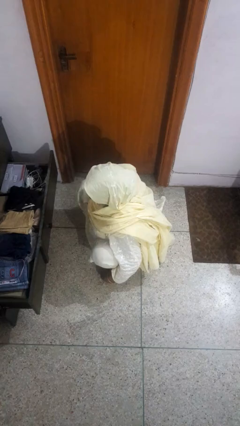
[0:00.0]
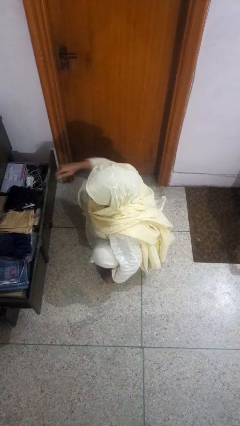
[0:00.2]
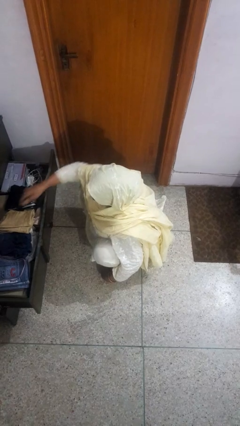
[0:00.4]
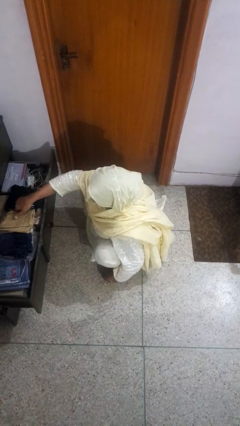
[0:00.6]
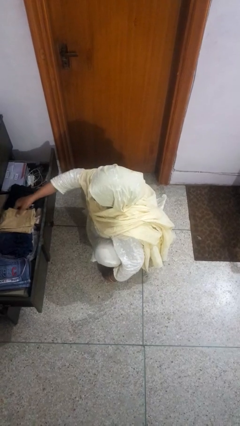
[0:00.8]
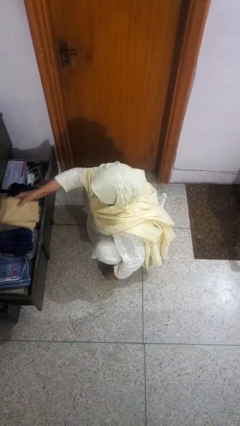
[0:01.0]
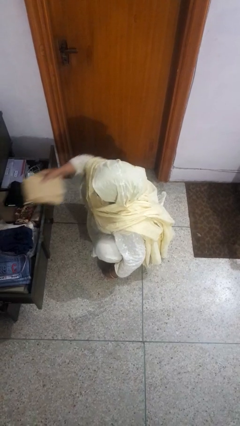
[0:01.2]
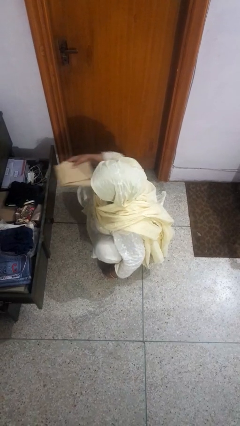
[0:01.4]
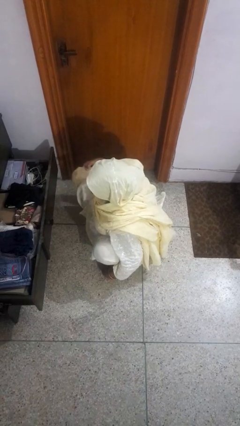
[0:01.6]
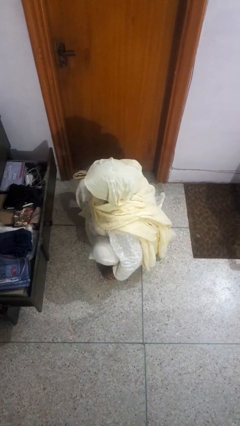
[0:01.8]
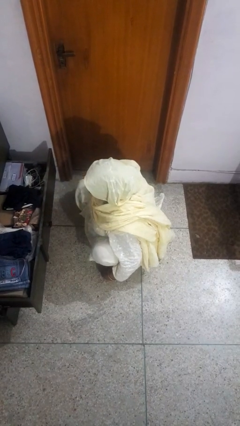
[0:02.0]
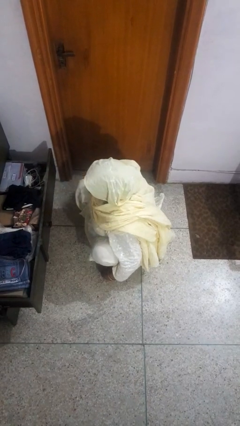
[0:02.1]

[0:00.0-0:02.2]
person takes clothes from dresser

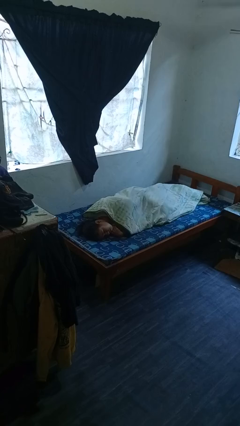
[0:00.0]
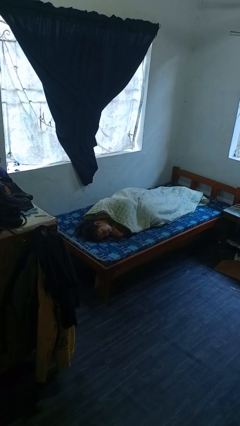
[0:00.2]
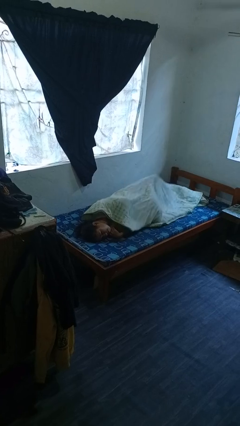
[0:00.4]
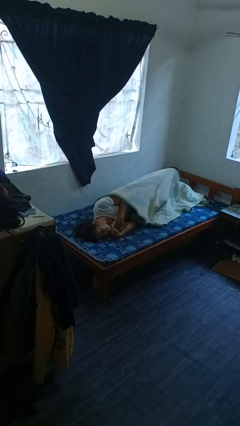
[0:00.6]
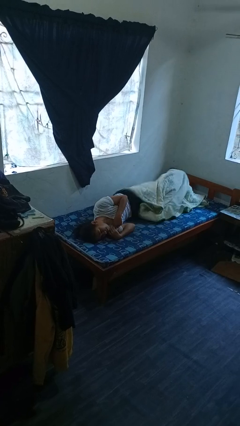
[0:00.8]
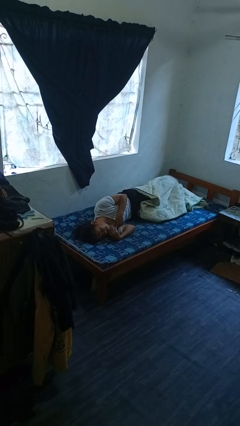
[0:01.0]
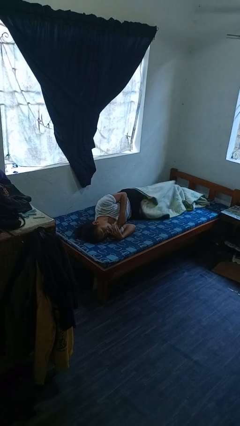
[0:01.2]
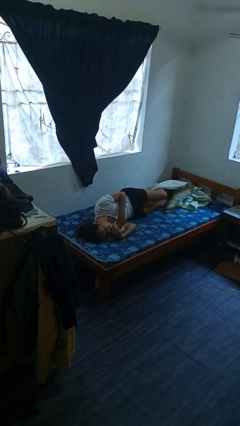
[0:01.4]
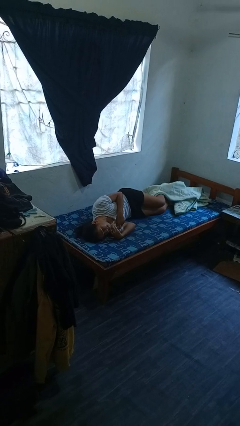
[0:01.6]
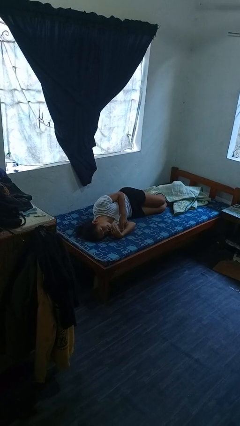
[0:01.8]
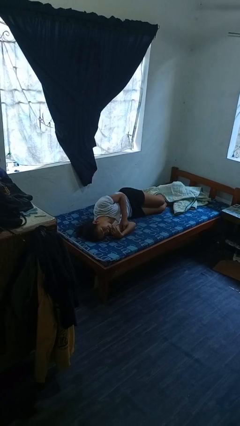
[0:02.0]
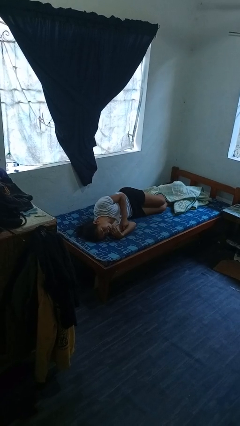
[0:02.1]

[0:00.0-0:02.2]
person uncovers with bedsheets

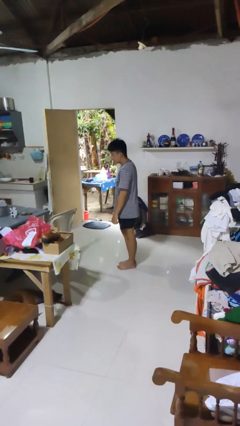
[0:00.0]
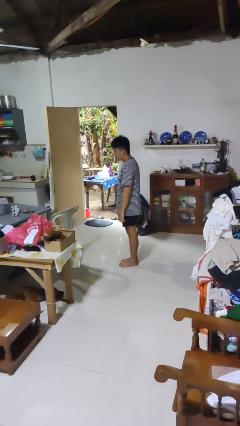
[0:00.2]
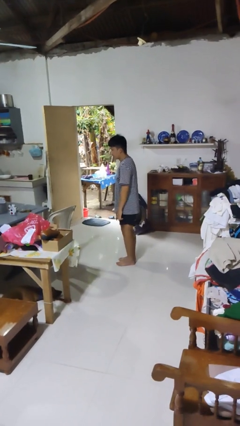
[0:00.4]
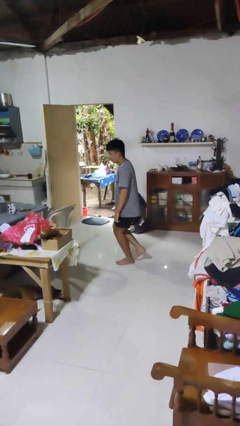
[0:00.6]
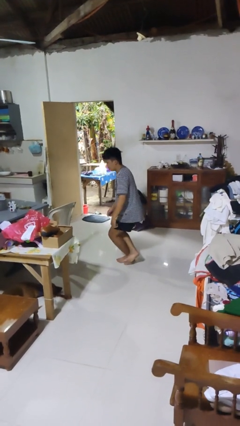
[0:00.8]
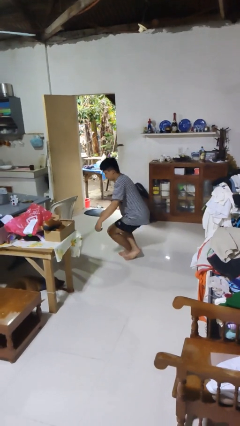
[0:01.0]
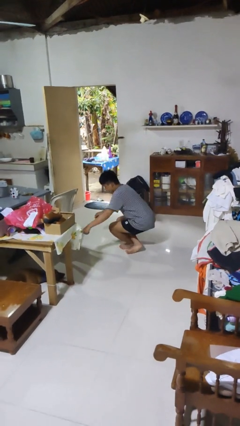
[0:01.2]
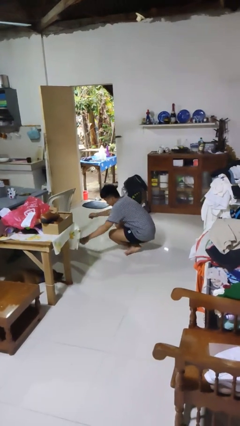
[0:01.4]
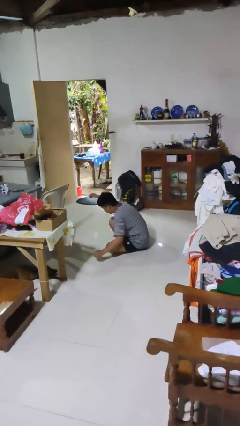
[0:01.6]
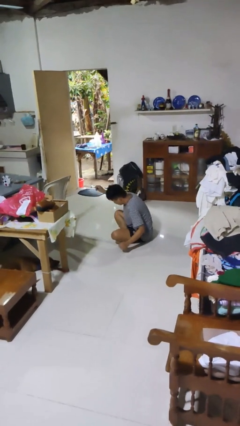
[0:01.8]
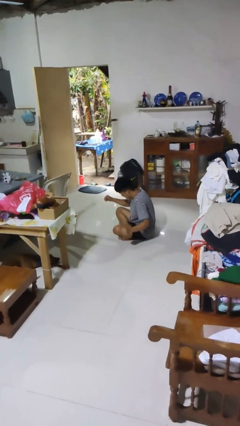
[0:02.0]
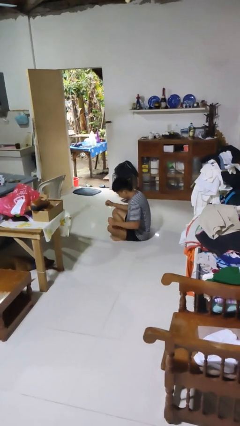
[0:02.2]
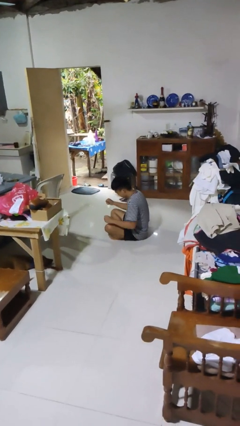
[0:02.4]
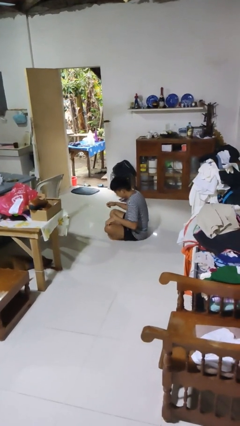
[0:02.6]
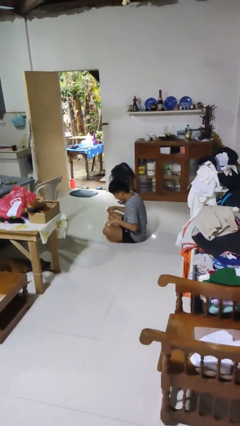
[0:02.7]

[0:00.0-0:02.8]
person sits crisscross

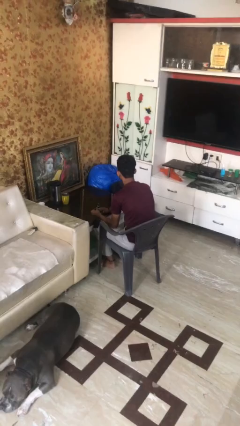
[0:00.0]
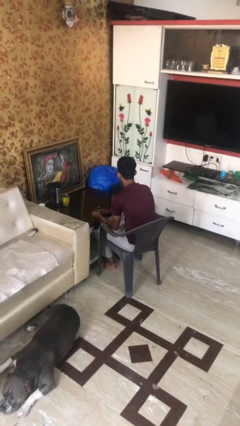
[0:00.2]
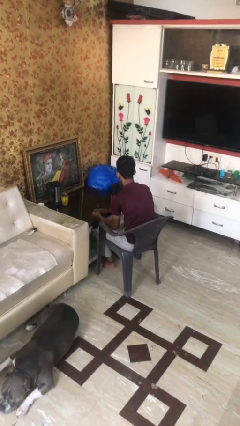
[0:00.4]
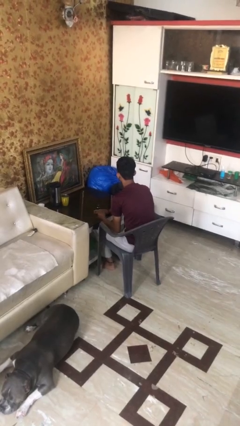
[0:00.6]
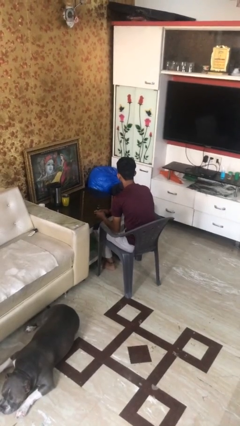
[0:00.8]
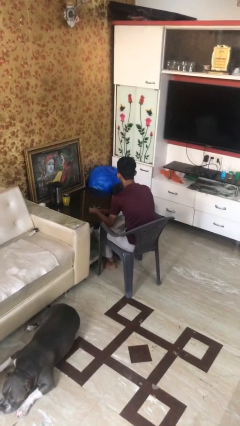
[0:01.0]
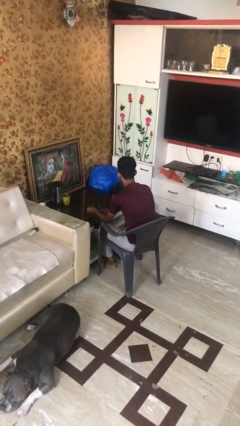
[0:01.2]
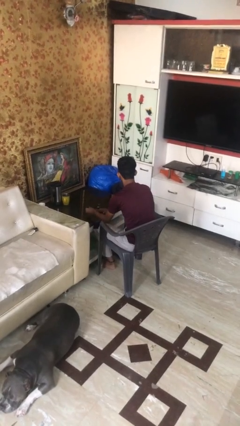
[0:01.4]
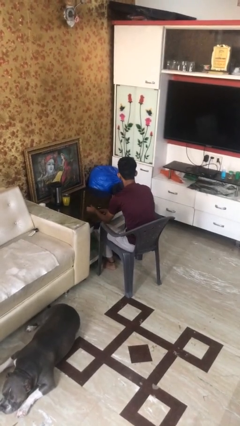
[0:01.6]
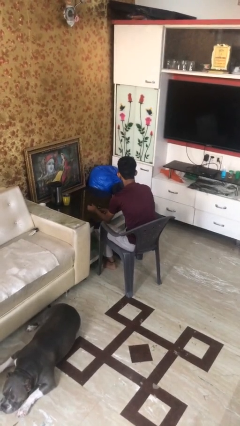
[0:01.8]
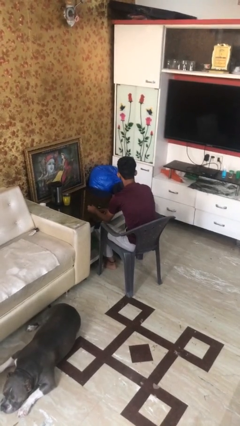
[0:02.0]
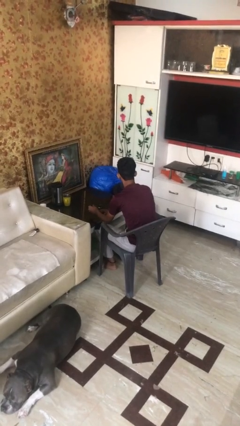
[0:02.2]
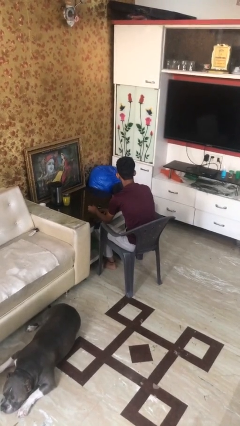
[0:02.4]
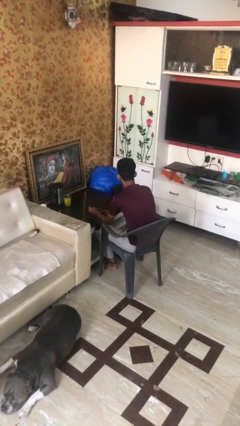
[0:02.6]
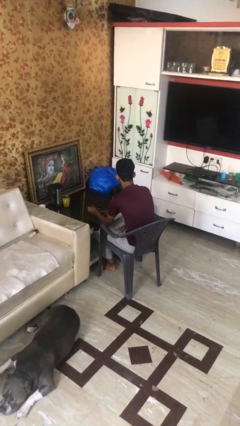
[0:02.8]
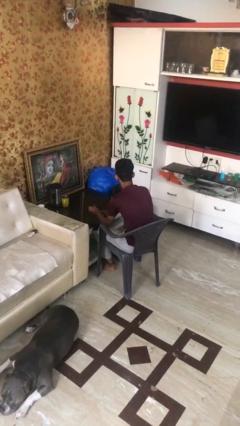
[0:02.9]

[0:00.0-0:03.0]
person paints fingernails

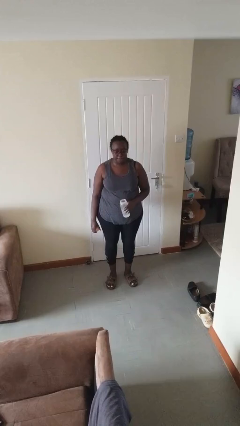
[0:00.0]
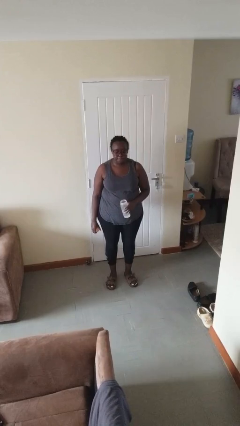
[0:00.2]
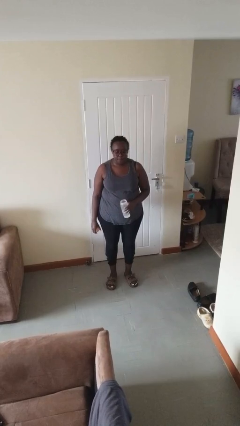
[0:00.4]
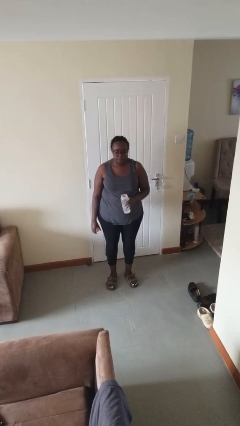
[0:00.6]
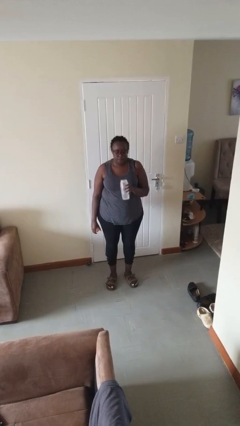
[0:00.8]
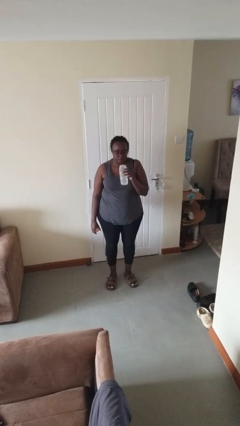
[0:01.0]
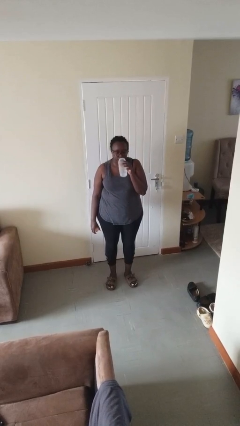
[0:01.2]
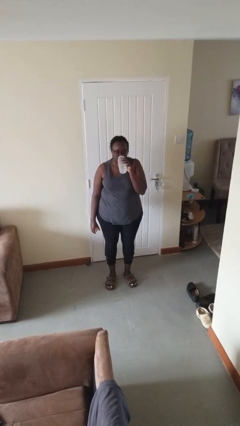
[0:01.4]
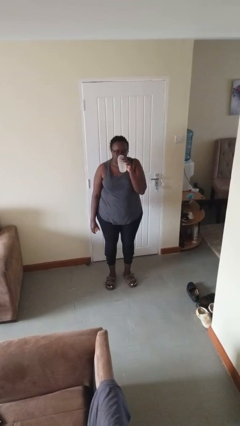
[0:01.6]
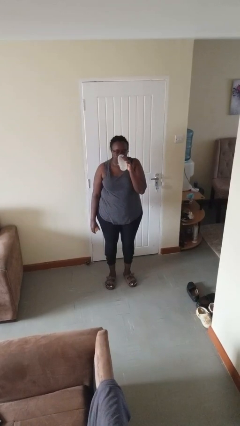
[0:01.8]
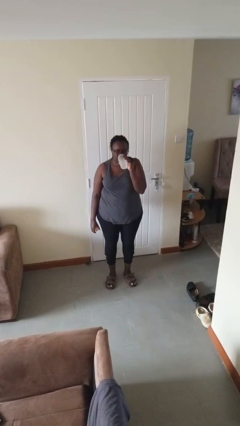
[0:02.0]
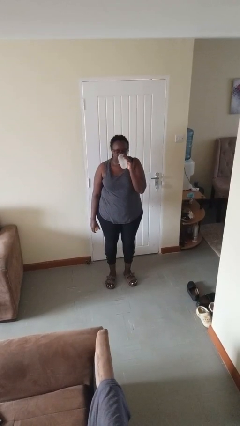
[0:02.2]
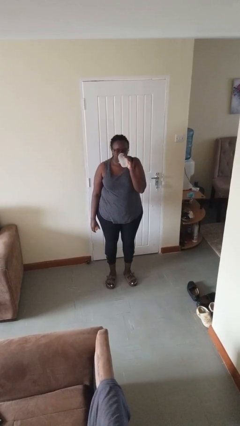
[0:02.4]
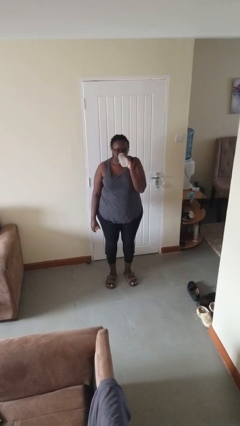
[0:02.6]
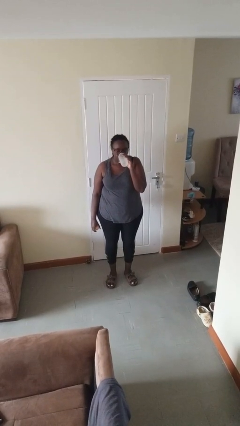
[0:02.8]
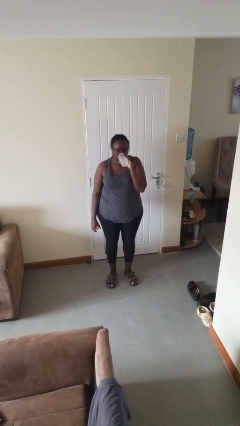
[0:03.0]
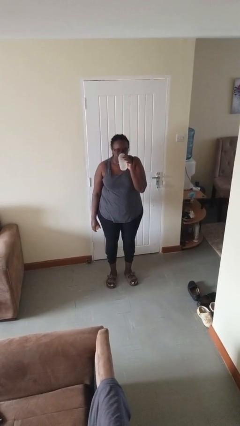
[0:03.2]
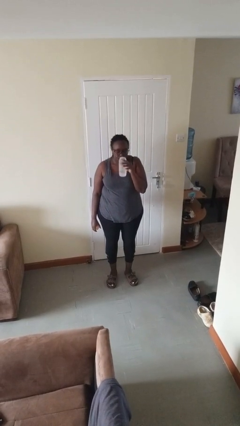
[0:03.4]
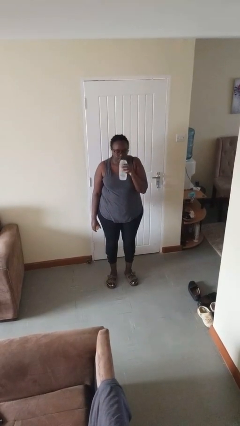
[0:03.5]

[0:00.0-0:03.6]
person drinks from bottle

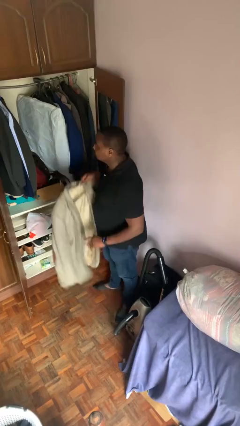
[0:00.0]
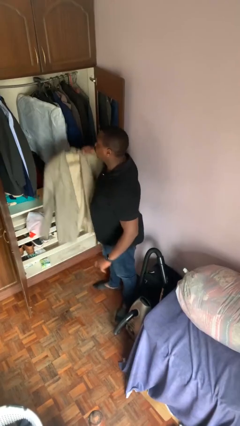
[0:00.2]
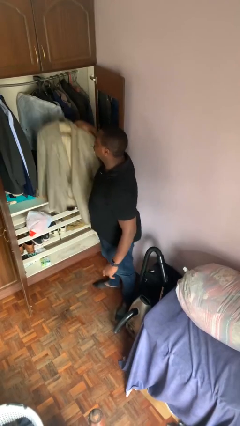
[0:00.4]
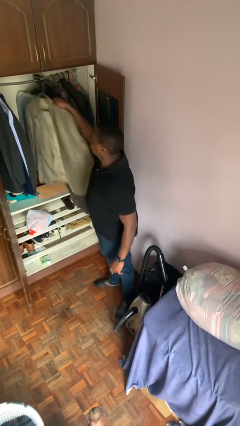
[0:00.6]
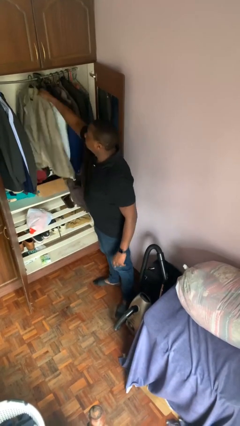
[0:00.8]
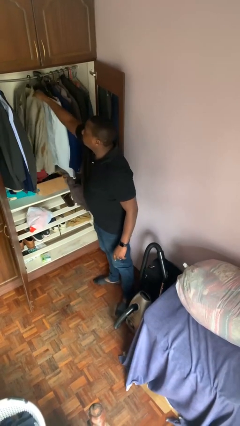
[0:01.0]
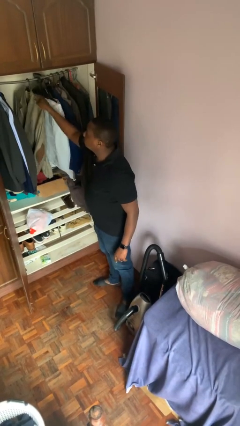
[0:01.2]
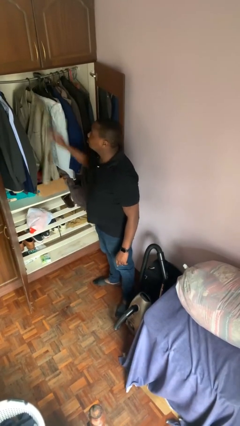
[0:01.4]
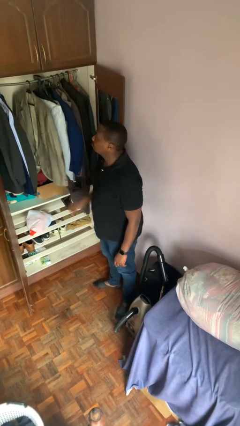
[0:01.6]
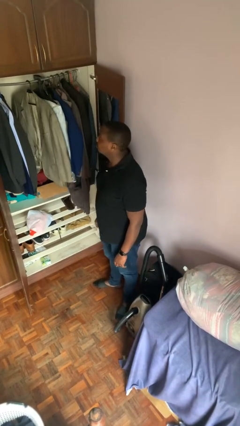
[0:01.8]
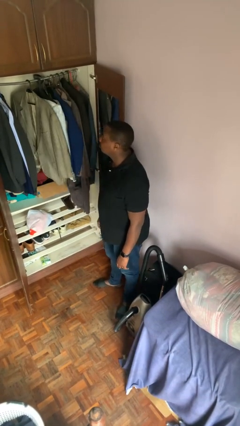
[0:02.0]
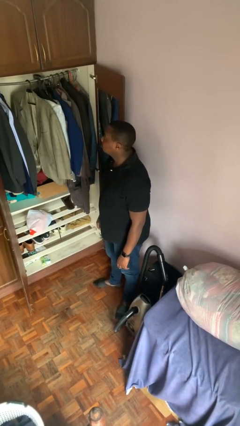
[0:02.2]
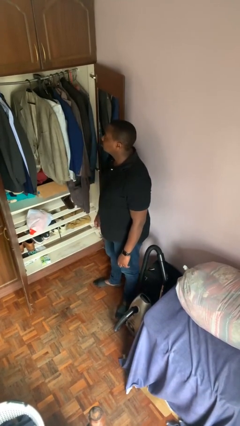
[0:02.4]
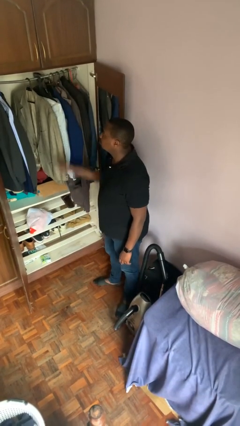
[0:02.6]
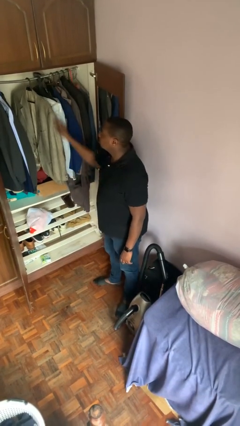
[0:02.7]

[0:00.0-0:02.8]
person puts clothes into closet

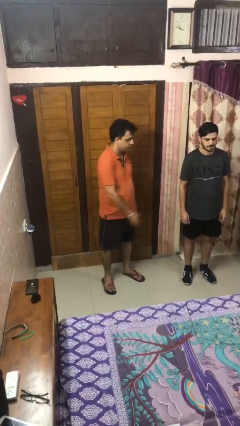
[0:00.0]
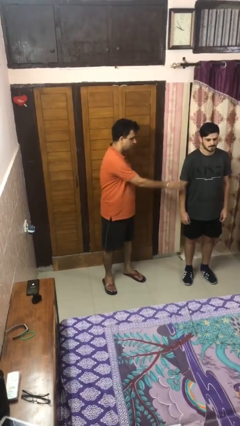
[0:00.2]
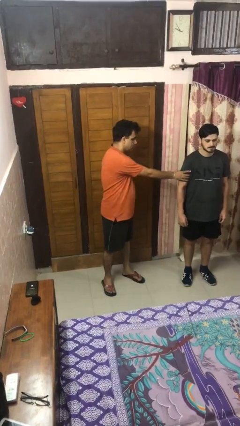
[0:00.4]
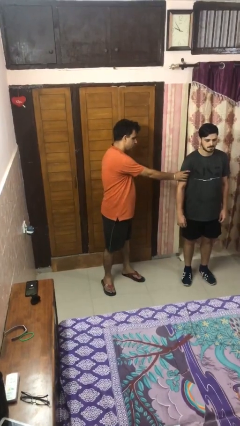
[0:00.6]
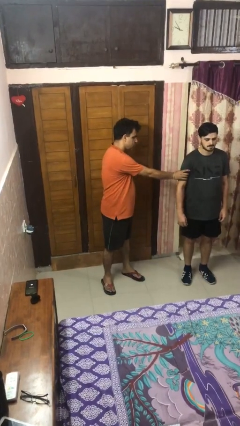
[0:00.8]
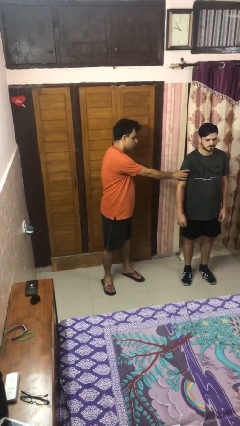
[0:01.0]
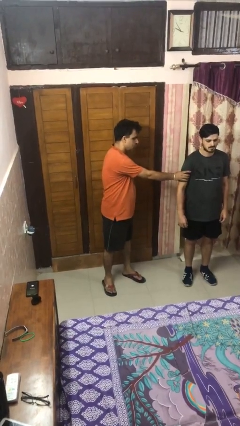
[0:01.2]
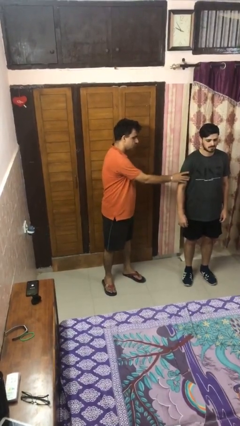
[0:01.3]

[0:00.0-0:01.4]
person grabs person by bicep
